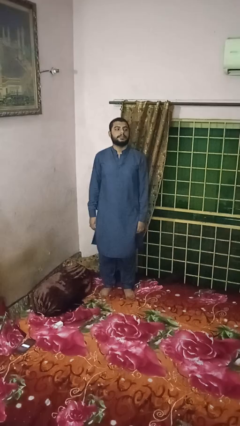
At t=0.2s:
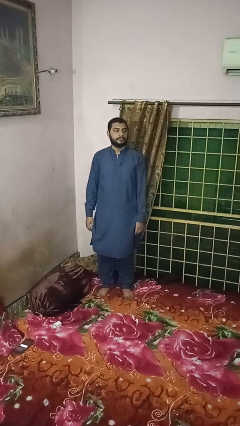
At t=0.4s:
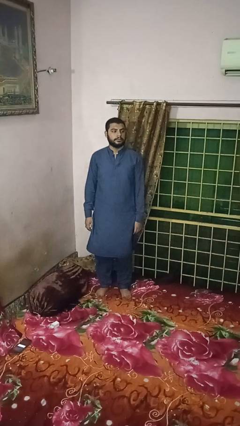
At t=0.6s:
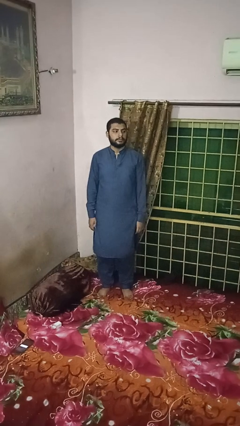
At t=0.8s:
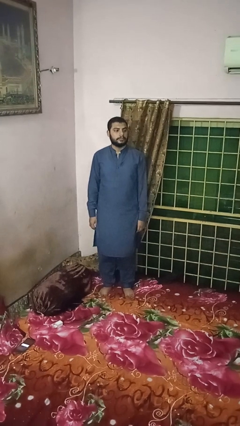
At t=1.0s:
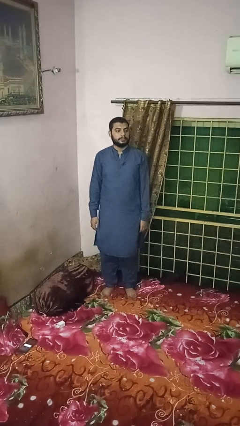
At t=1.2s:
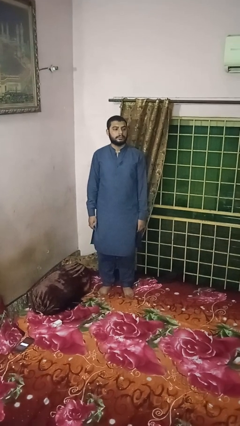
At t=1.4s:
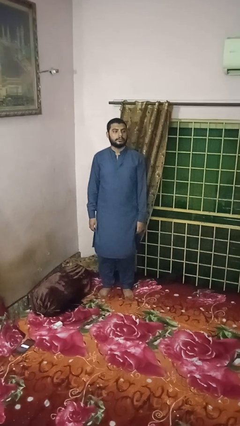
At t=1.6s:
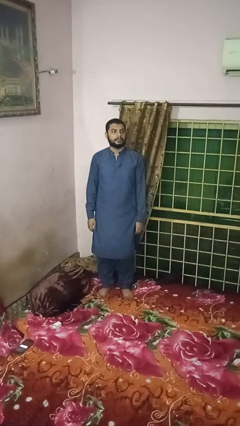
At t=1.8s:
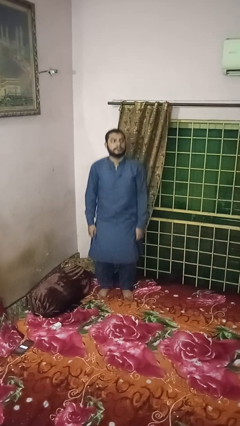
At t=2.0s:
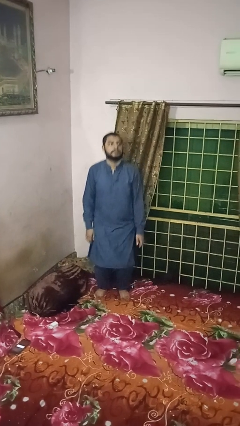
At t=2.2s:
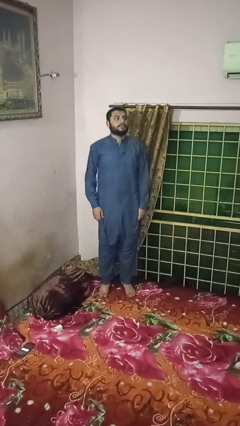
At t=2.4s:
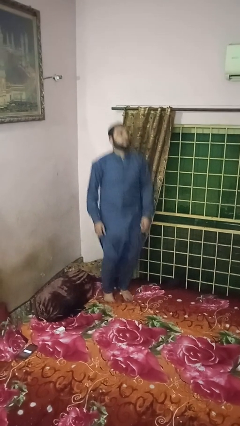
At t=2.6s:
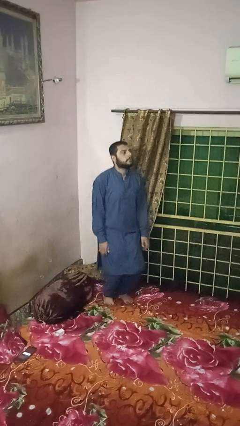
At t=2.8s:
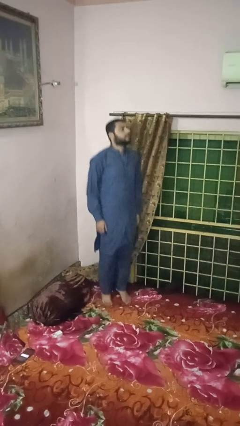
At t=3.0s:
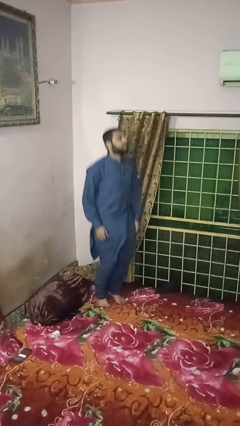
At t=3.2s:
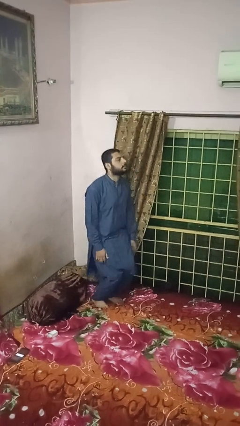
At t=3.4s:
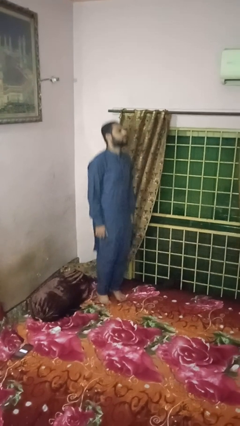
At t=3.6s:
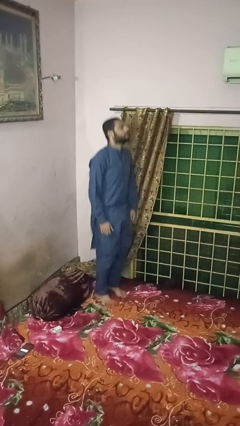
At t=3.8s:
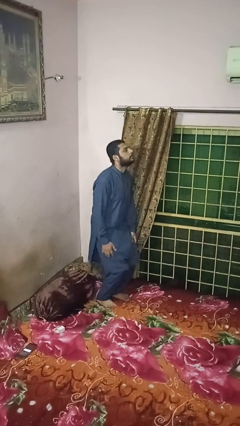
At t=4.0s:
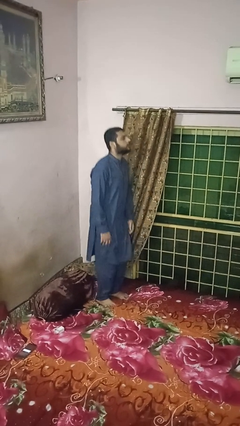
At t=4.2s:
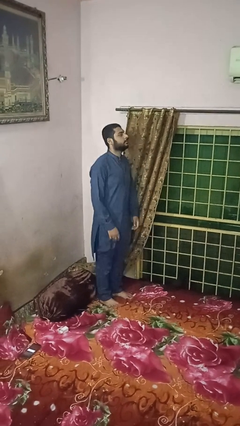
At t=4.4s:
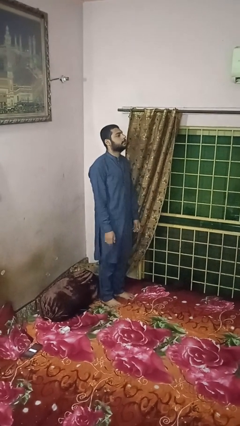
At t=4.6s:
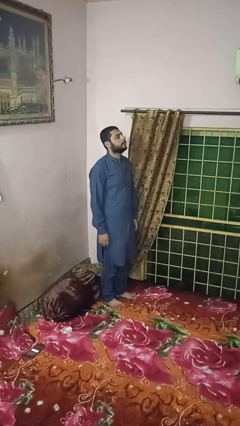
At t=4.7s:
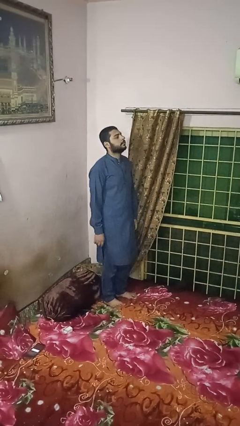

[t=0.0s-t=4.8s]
person jumps on bed

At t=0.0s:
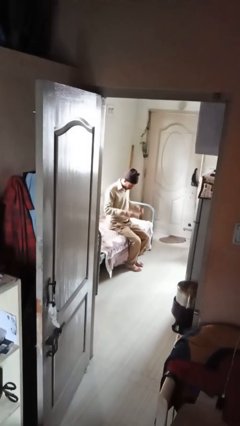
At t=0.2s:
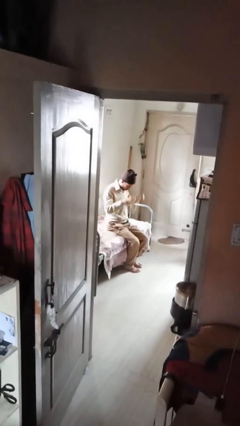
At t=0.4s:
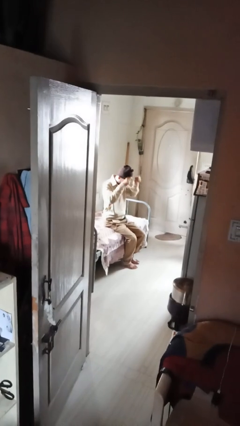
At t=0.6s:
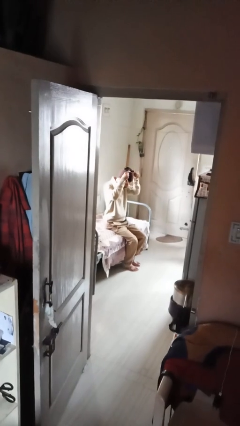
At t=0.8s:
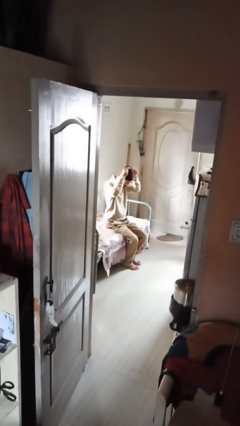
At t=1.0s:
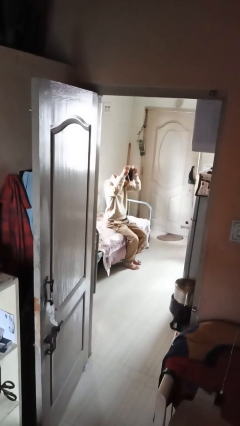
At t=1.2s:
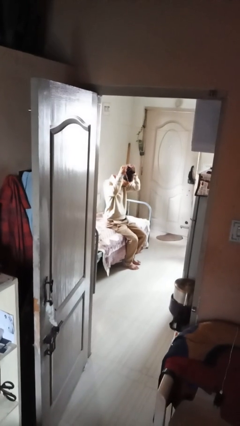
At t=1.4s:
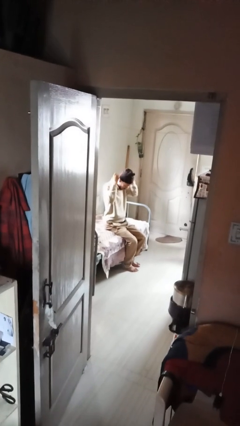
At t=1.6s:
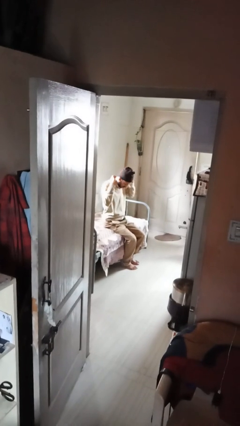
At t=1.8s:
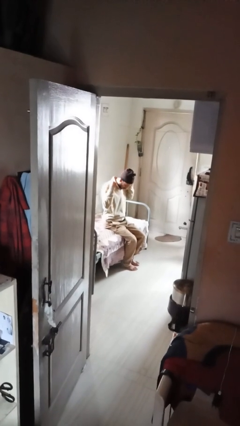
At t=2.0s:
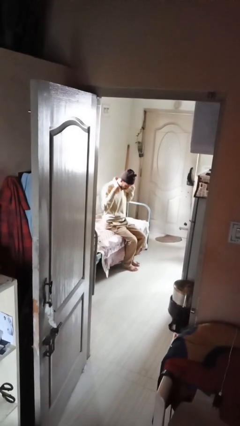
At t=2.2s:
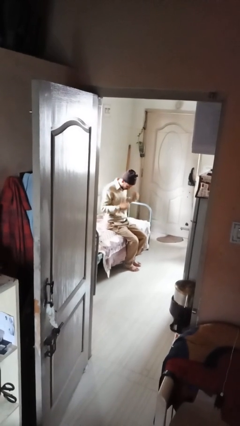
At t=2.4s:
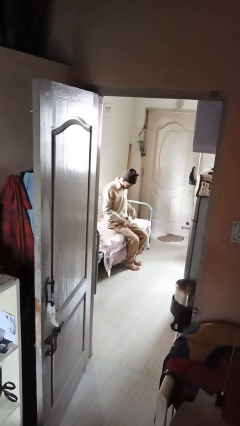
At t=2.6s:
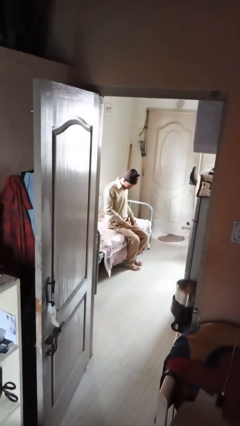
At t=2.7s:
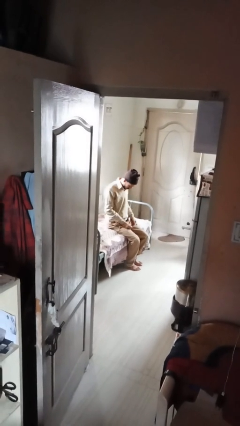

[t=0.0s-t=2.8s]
person puts on necklace

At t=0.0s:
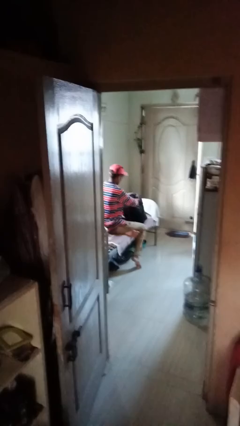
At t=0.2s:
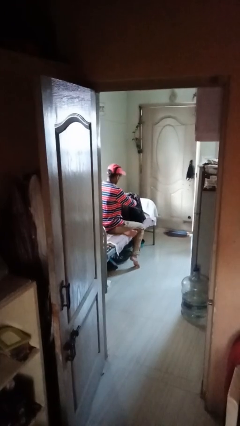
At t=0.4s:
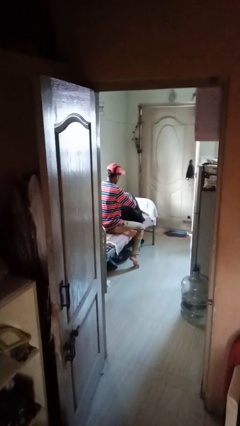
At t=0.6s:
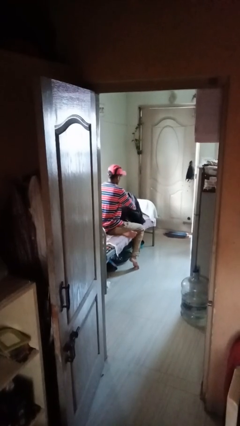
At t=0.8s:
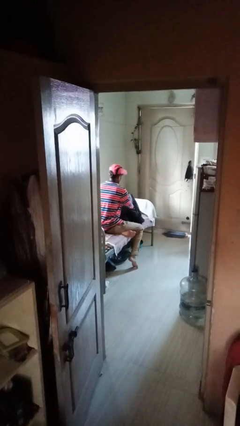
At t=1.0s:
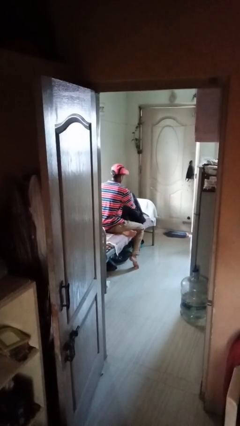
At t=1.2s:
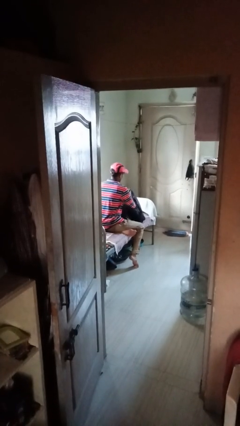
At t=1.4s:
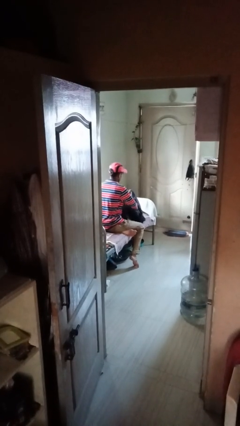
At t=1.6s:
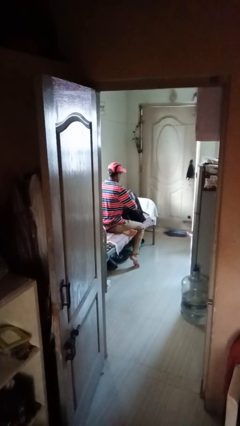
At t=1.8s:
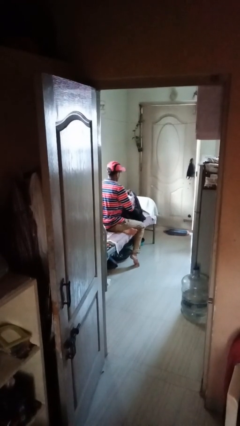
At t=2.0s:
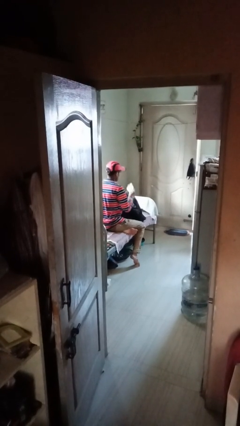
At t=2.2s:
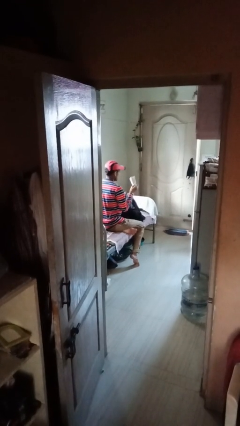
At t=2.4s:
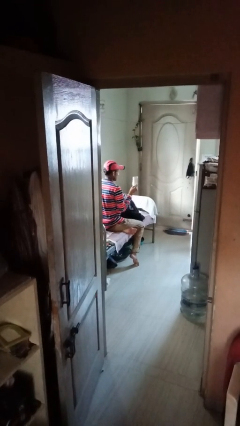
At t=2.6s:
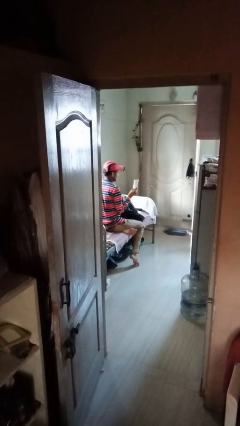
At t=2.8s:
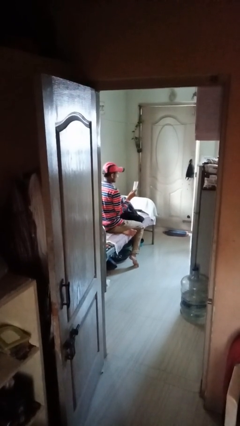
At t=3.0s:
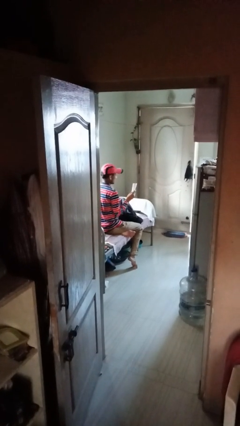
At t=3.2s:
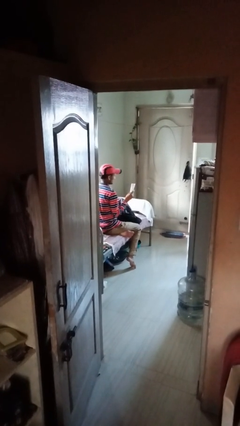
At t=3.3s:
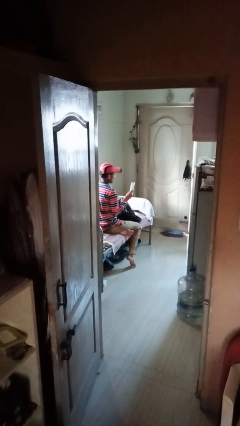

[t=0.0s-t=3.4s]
person takes object from backpack

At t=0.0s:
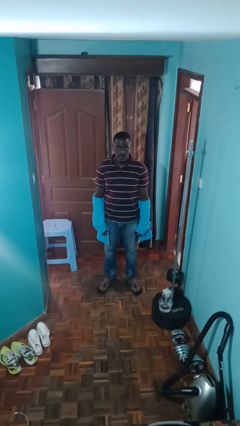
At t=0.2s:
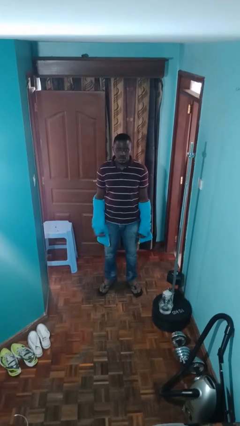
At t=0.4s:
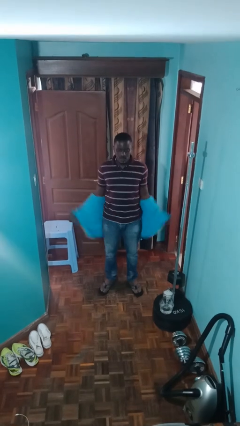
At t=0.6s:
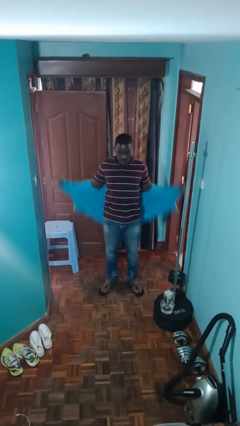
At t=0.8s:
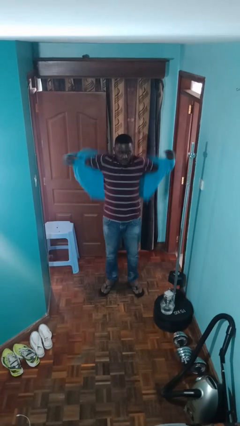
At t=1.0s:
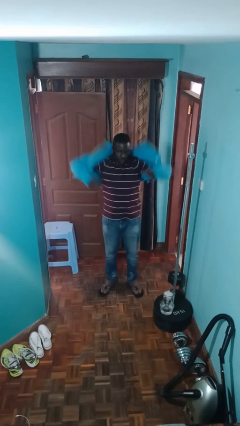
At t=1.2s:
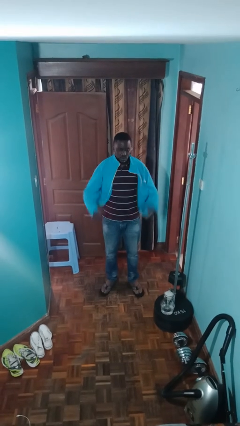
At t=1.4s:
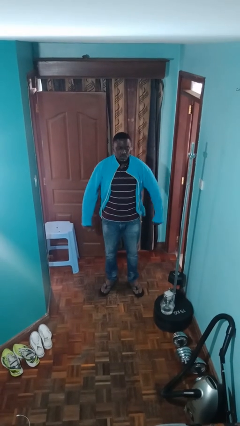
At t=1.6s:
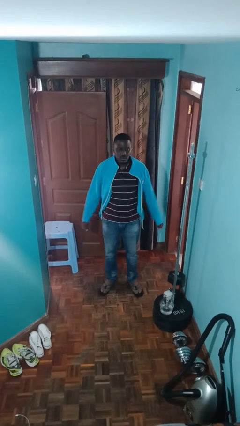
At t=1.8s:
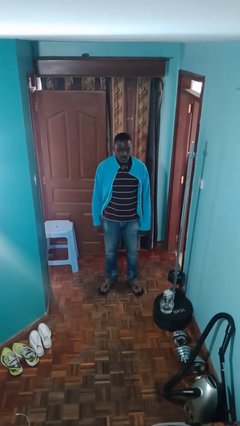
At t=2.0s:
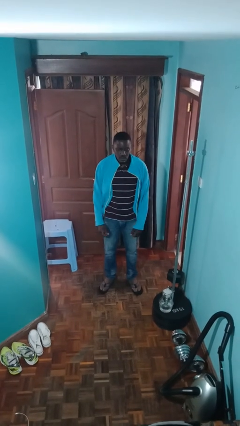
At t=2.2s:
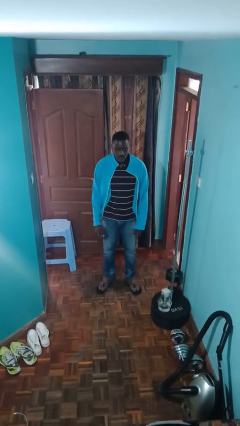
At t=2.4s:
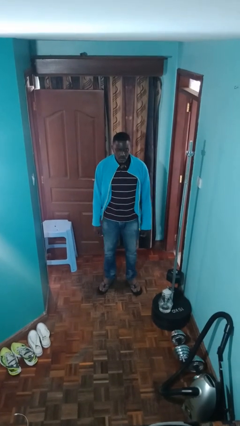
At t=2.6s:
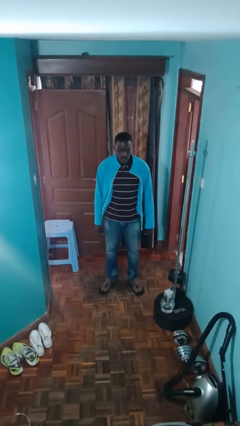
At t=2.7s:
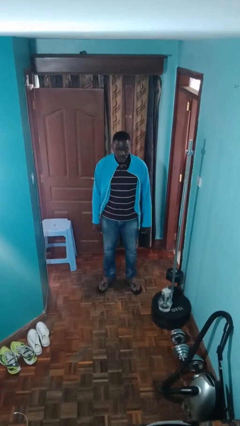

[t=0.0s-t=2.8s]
person puts on jacket

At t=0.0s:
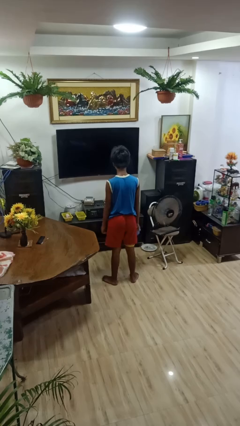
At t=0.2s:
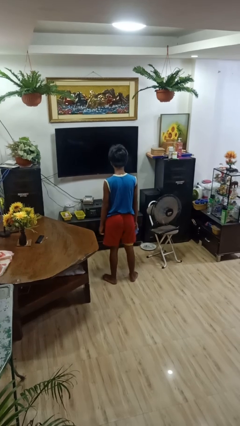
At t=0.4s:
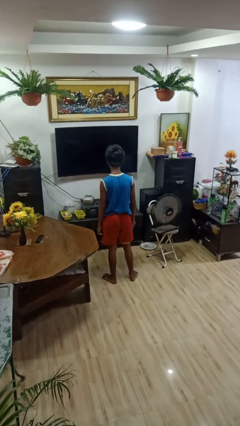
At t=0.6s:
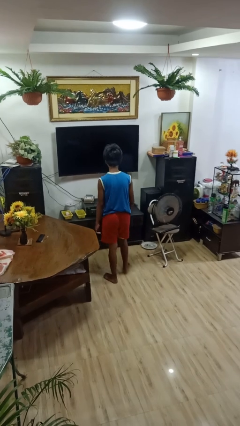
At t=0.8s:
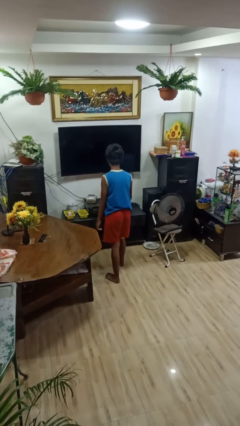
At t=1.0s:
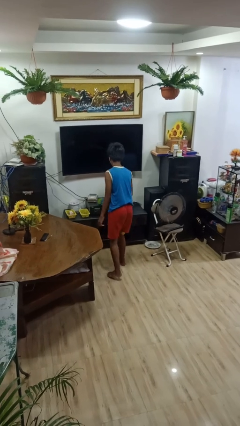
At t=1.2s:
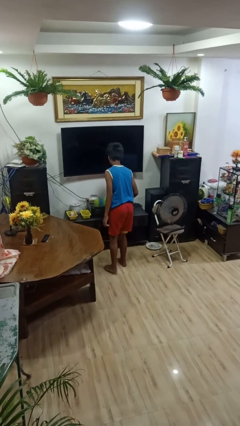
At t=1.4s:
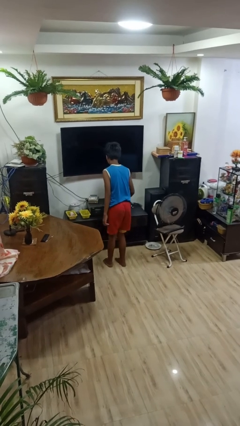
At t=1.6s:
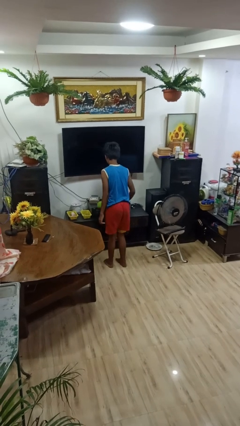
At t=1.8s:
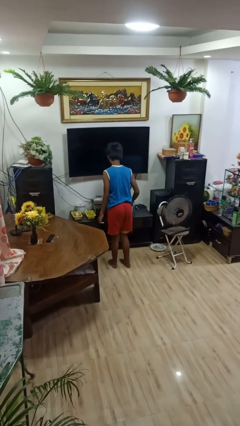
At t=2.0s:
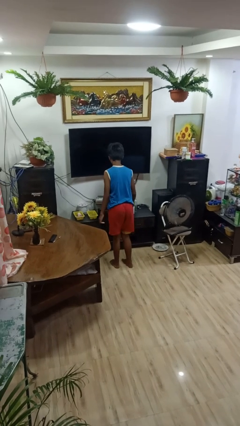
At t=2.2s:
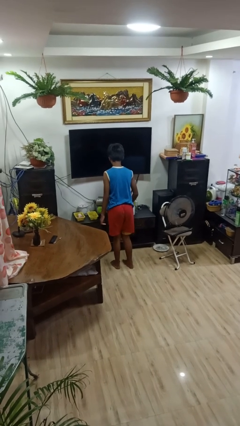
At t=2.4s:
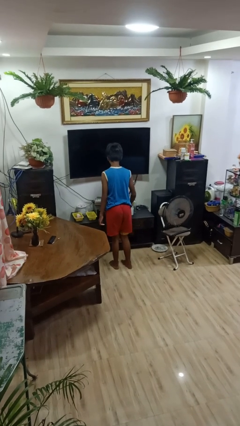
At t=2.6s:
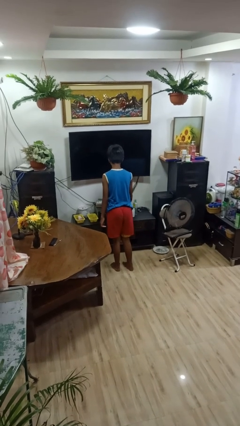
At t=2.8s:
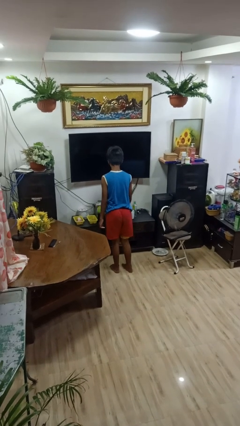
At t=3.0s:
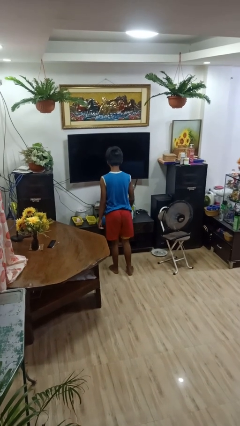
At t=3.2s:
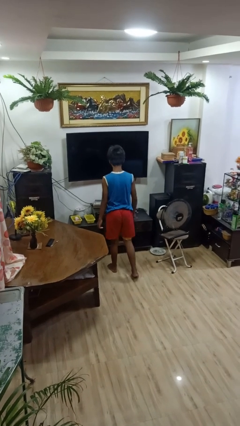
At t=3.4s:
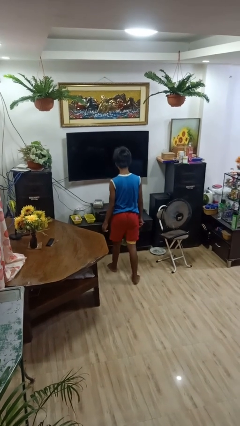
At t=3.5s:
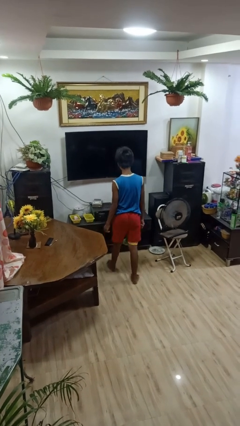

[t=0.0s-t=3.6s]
person dusts furniture
